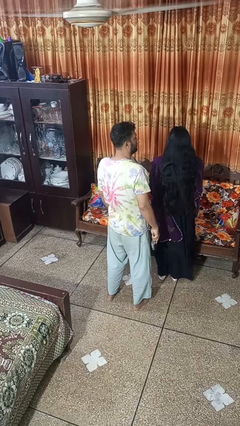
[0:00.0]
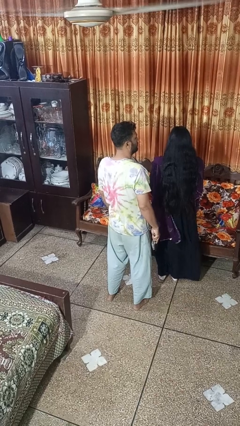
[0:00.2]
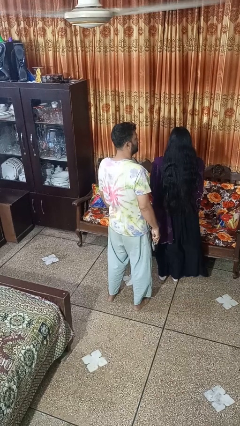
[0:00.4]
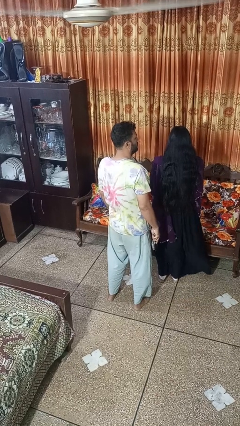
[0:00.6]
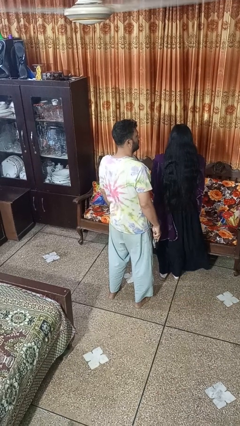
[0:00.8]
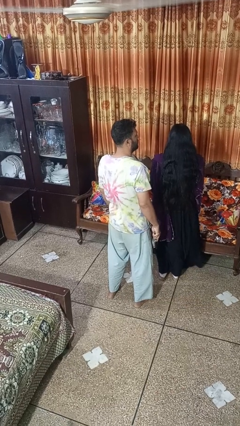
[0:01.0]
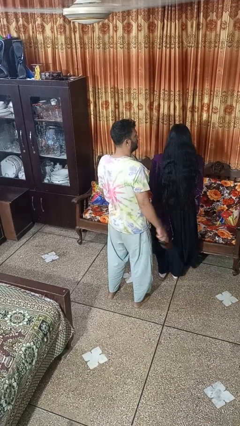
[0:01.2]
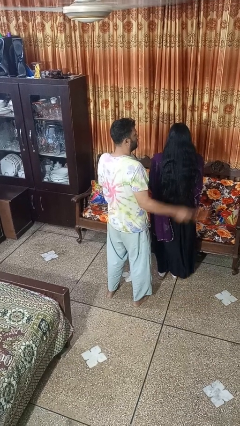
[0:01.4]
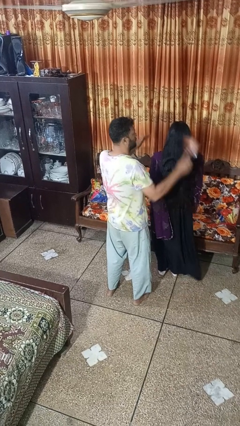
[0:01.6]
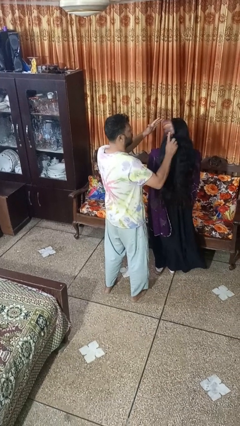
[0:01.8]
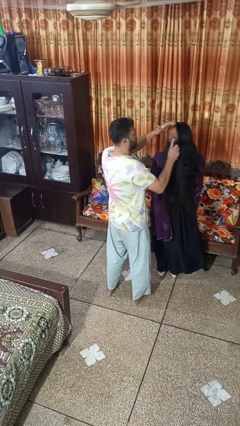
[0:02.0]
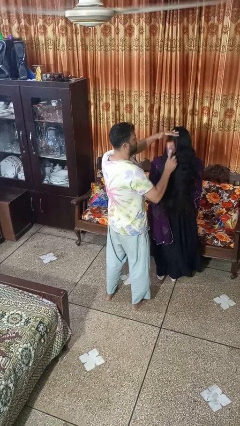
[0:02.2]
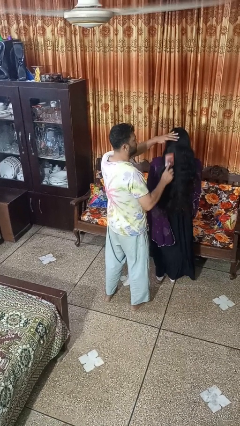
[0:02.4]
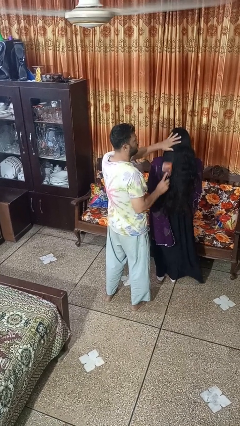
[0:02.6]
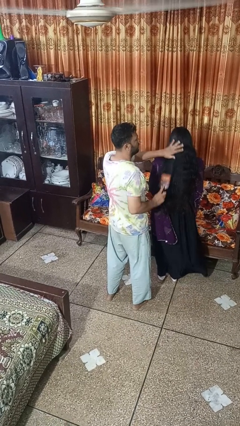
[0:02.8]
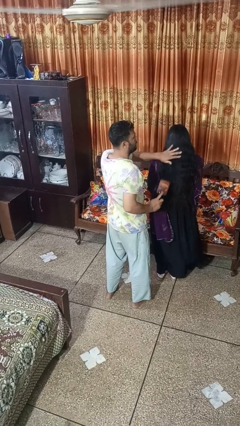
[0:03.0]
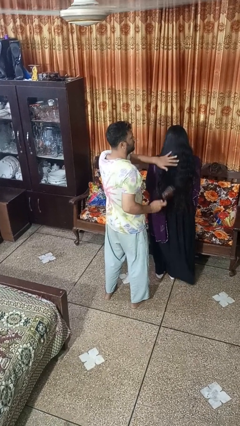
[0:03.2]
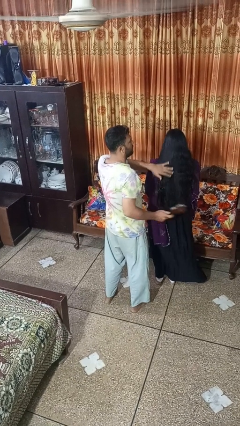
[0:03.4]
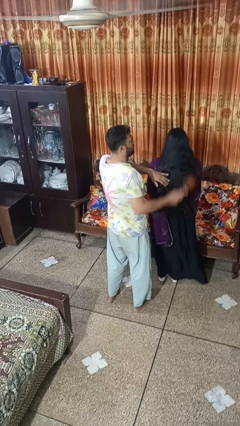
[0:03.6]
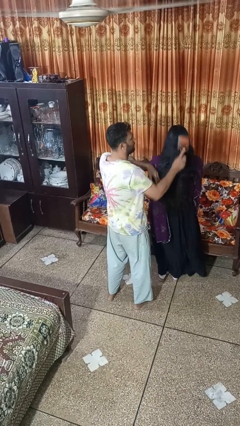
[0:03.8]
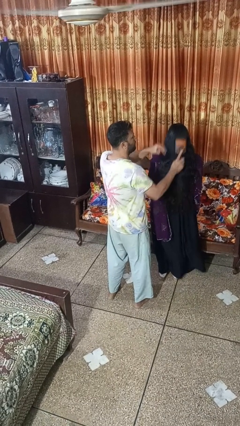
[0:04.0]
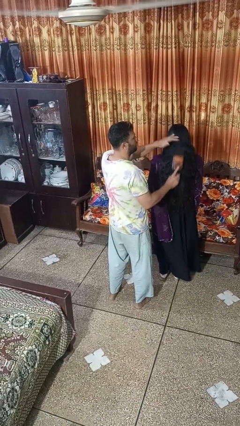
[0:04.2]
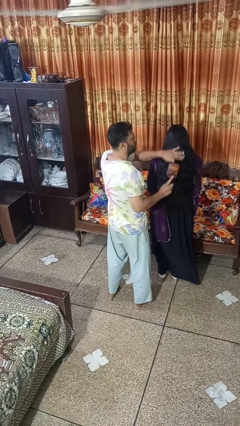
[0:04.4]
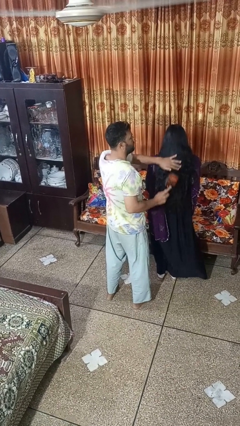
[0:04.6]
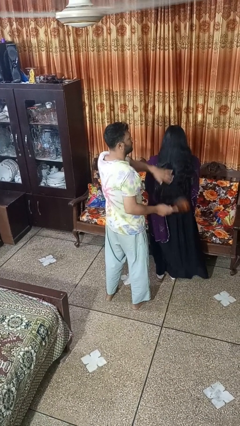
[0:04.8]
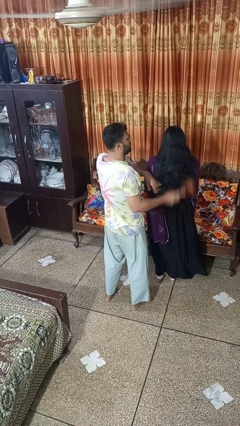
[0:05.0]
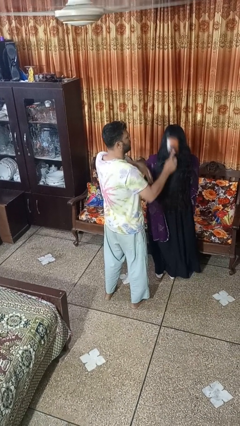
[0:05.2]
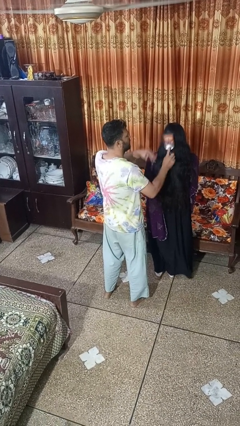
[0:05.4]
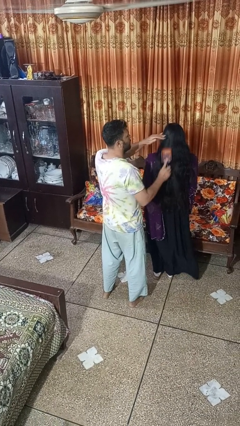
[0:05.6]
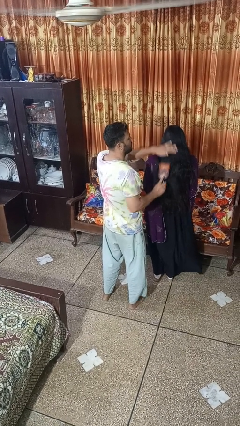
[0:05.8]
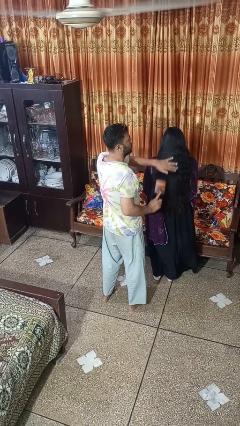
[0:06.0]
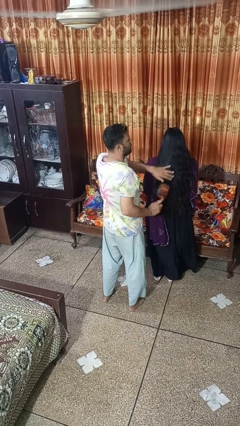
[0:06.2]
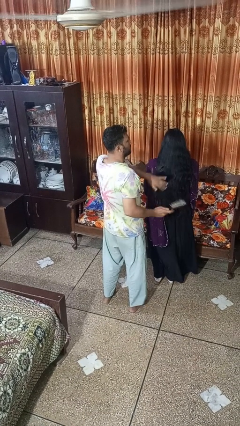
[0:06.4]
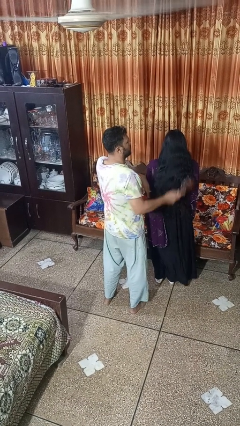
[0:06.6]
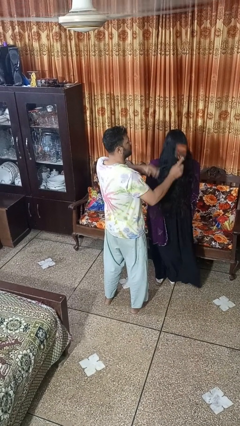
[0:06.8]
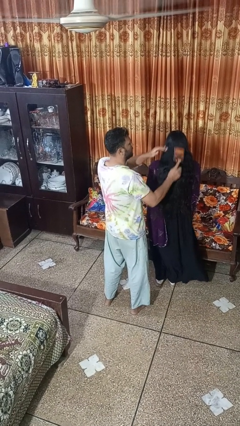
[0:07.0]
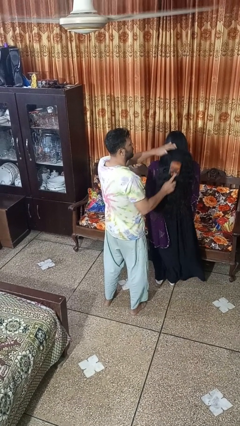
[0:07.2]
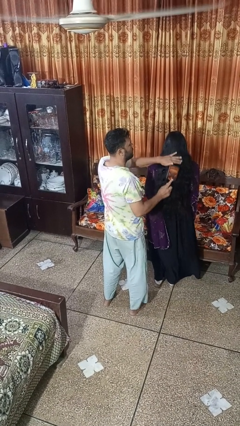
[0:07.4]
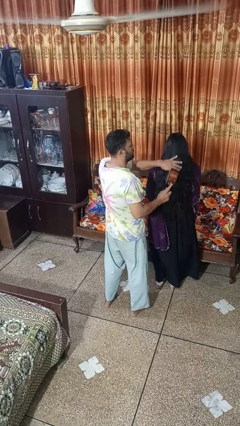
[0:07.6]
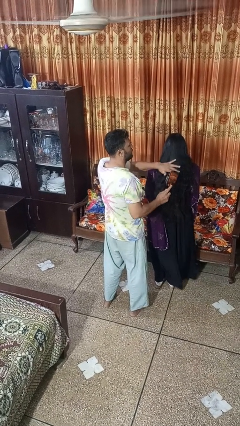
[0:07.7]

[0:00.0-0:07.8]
person brushes hair of person

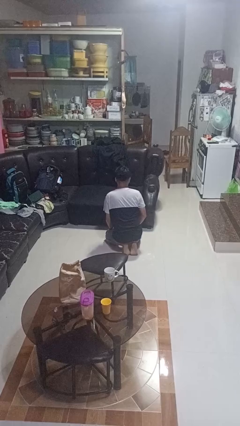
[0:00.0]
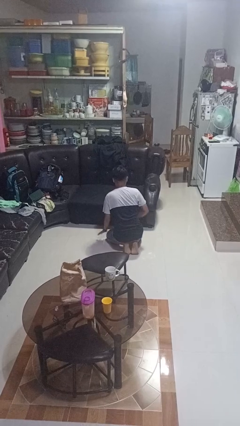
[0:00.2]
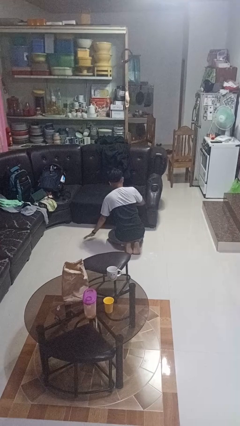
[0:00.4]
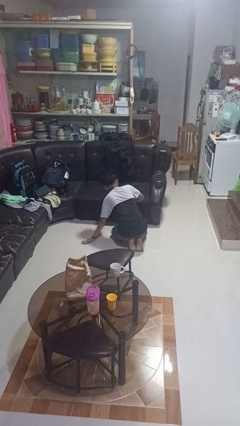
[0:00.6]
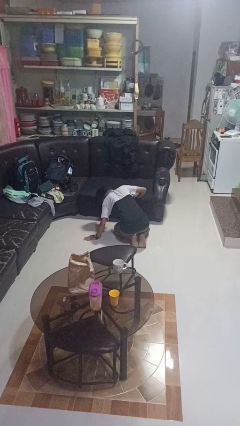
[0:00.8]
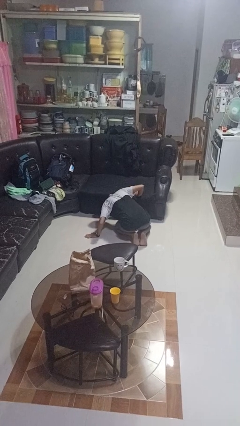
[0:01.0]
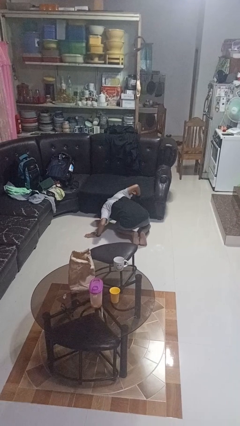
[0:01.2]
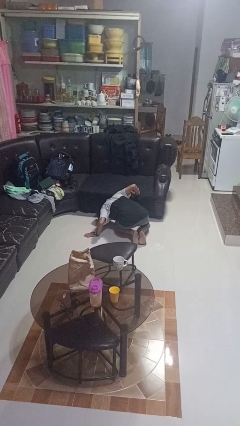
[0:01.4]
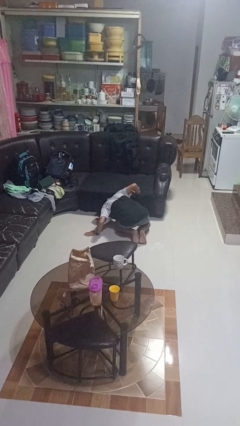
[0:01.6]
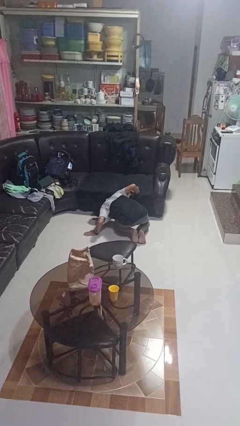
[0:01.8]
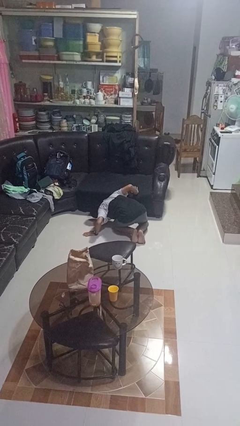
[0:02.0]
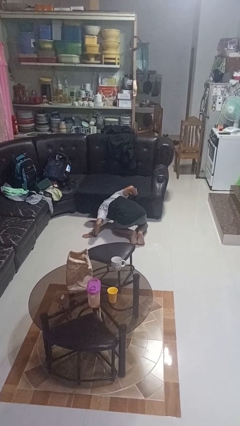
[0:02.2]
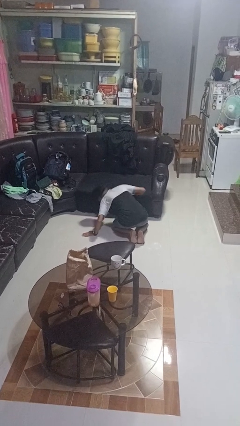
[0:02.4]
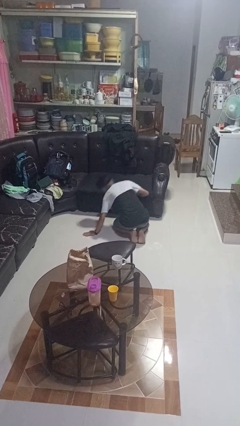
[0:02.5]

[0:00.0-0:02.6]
person searches under couch

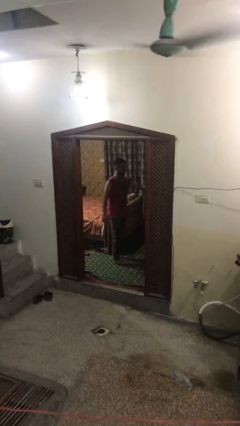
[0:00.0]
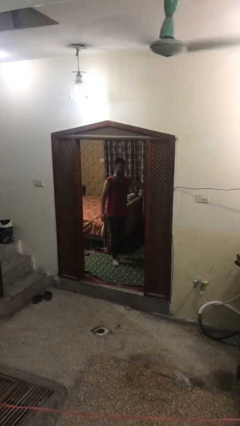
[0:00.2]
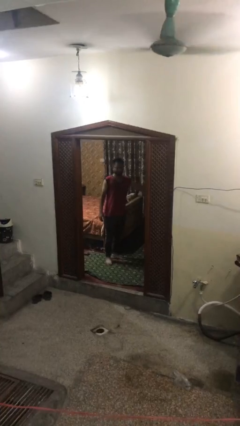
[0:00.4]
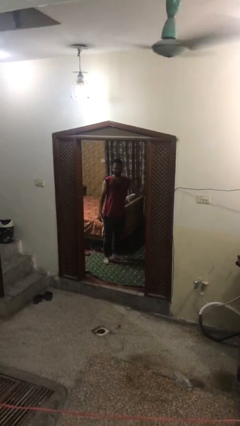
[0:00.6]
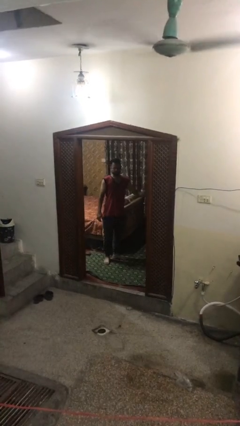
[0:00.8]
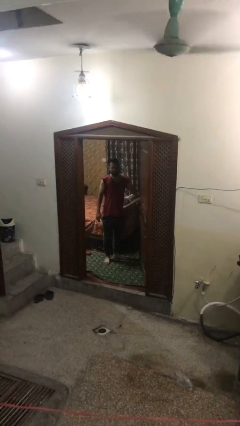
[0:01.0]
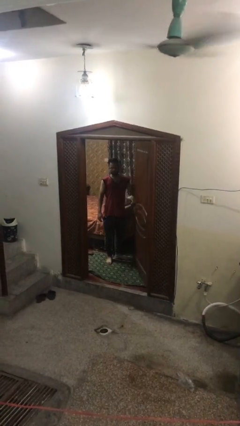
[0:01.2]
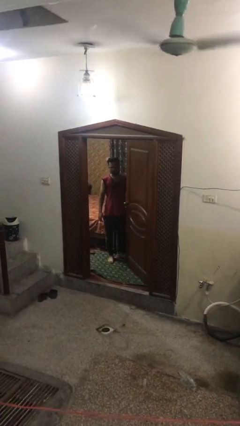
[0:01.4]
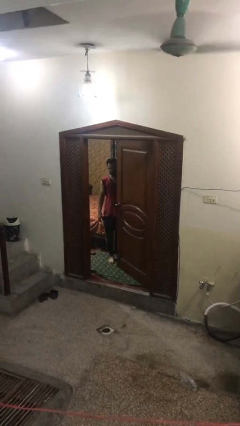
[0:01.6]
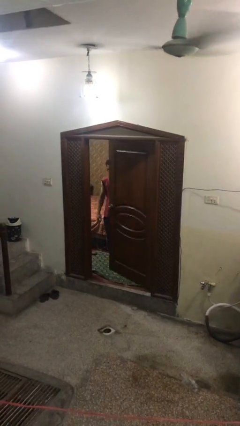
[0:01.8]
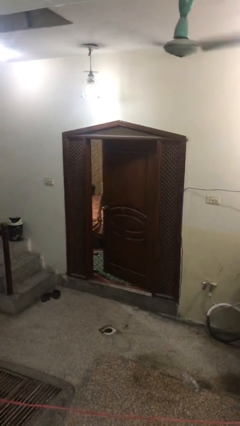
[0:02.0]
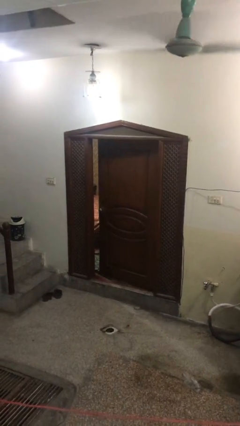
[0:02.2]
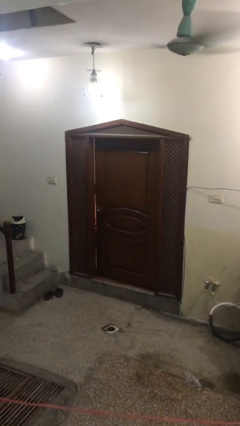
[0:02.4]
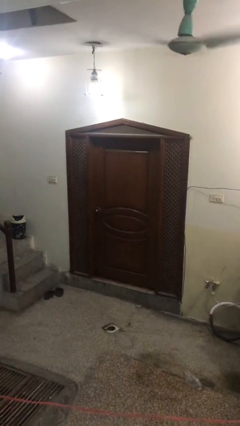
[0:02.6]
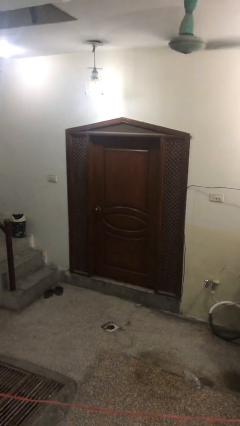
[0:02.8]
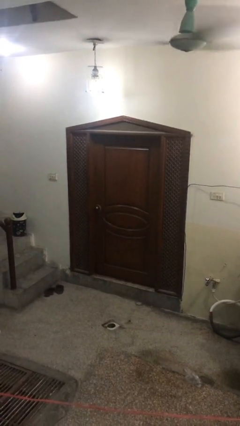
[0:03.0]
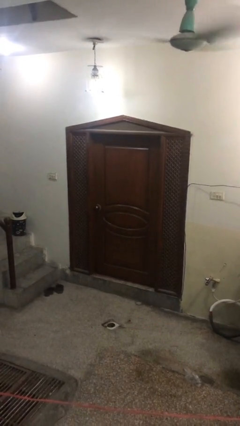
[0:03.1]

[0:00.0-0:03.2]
person closes facility door

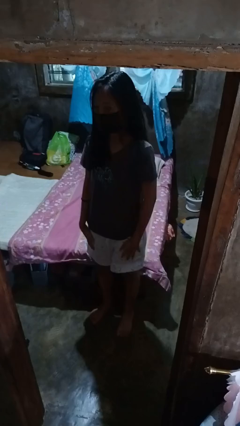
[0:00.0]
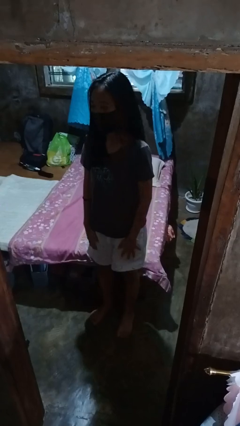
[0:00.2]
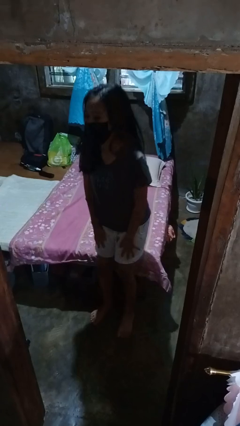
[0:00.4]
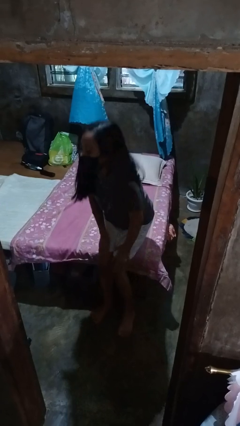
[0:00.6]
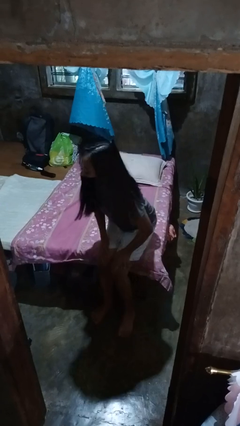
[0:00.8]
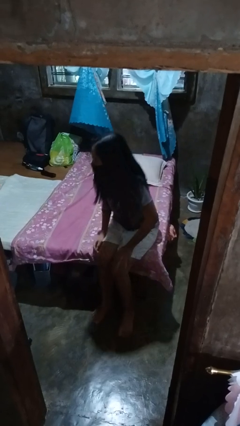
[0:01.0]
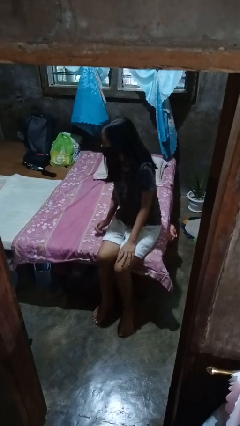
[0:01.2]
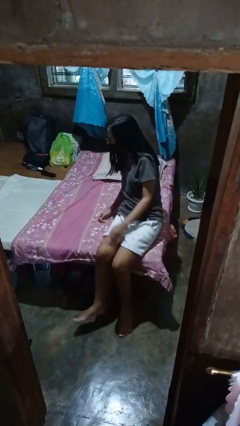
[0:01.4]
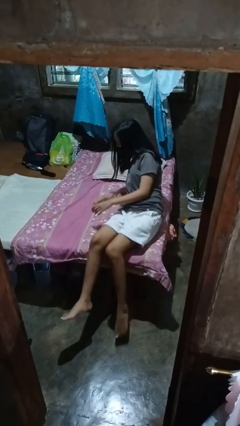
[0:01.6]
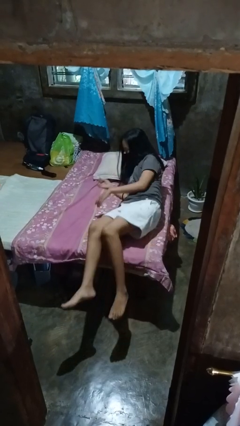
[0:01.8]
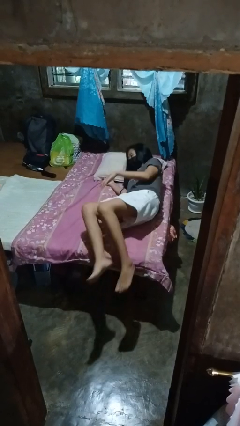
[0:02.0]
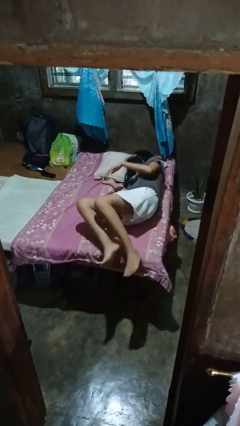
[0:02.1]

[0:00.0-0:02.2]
person lies down on bed

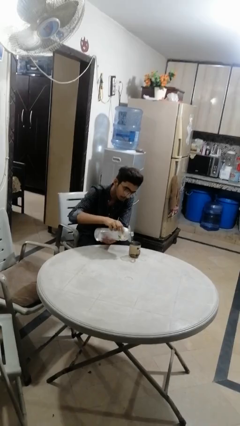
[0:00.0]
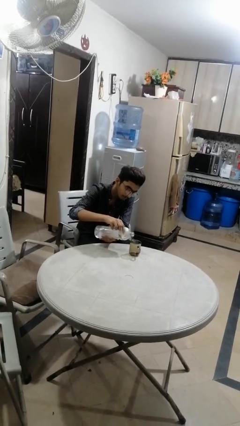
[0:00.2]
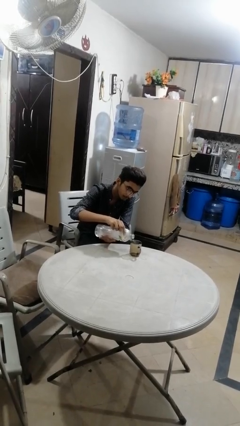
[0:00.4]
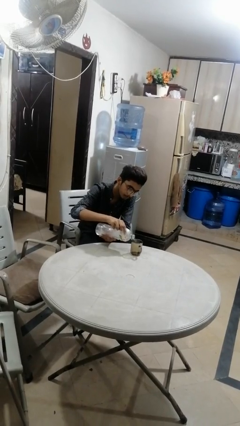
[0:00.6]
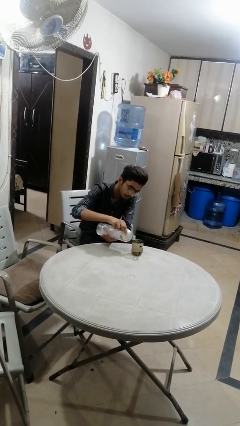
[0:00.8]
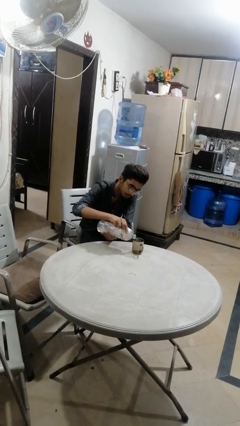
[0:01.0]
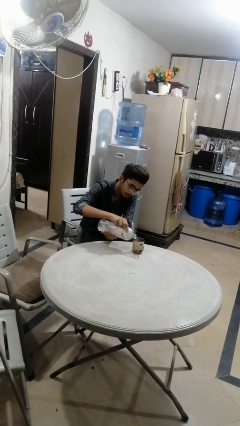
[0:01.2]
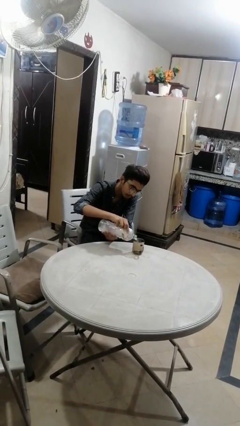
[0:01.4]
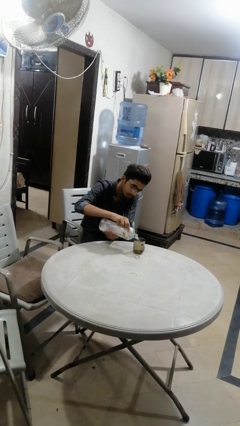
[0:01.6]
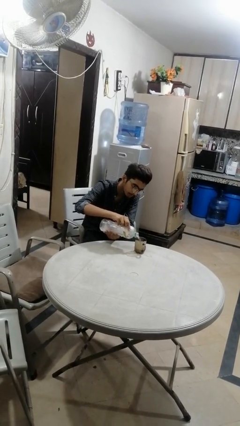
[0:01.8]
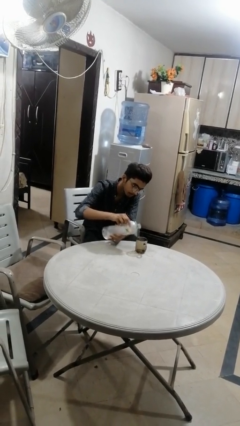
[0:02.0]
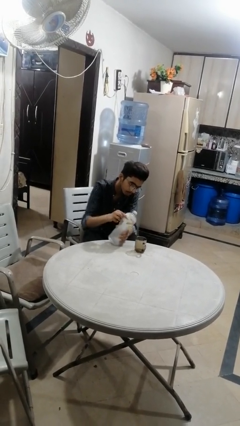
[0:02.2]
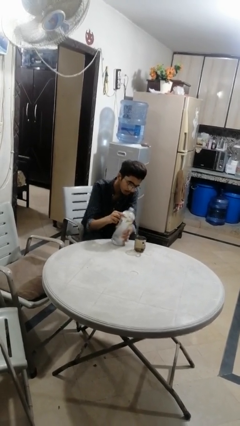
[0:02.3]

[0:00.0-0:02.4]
person pours liquid into cup
